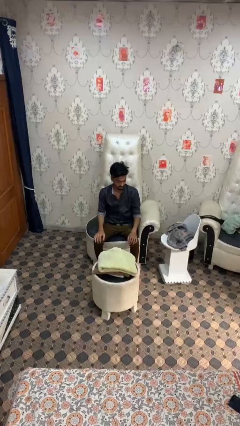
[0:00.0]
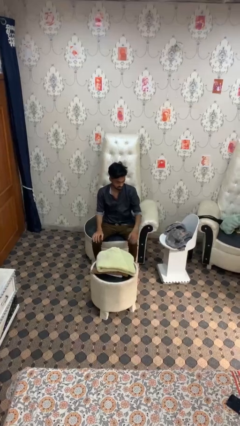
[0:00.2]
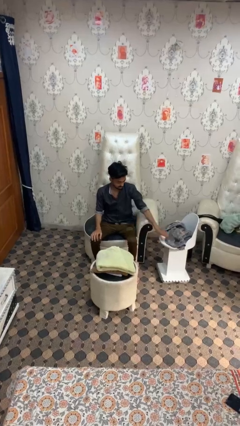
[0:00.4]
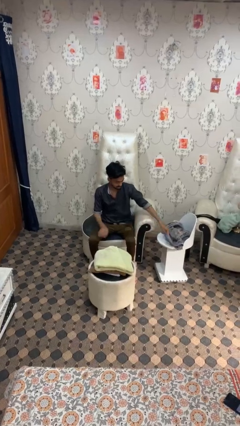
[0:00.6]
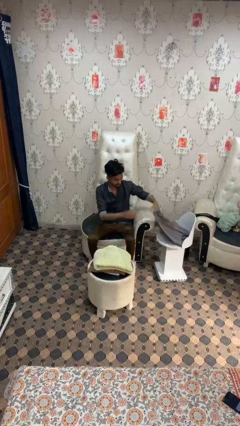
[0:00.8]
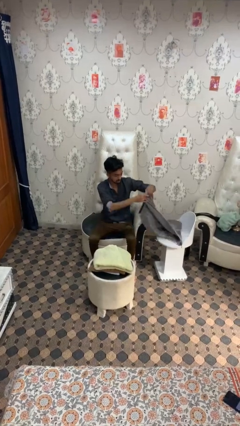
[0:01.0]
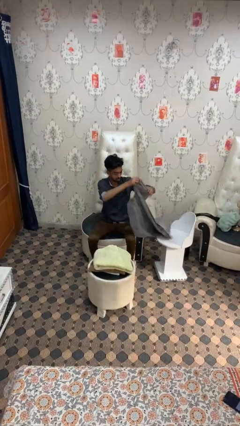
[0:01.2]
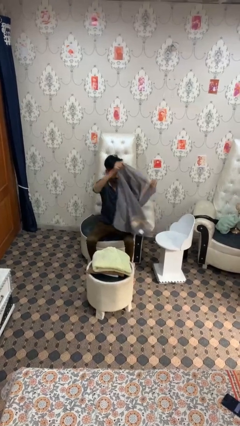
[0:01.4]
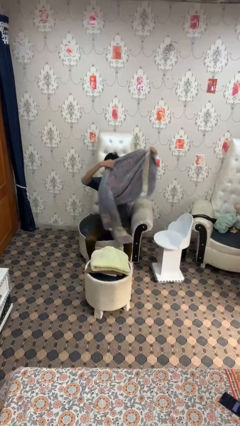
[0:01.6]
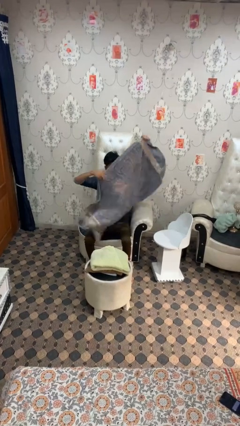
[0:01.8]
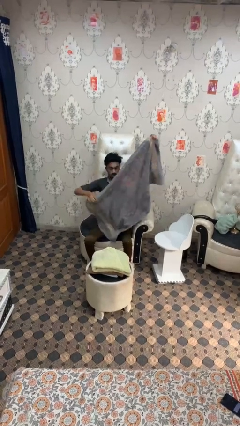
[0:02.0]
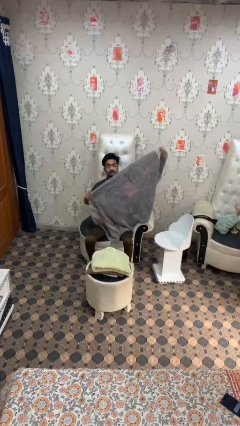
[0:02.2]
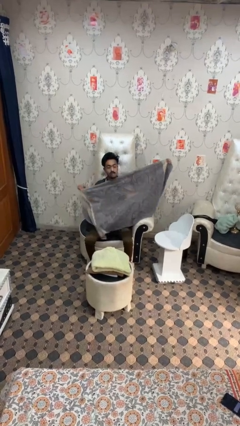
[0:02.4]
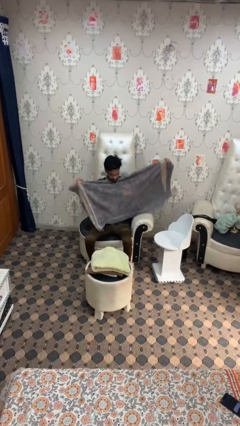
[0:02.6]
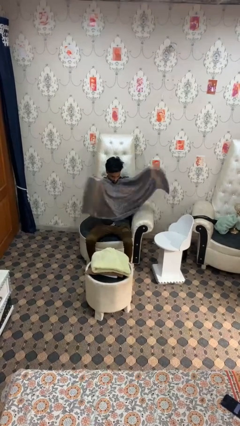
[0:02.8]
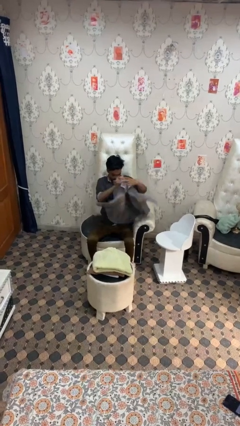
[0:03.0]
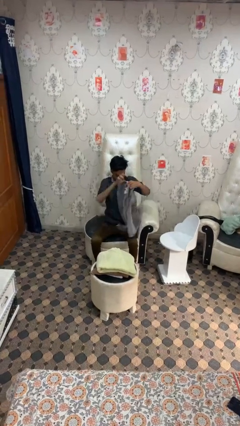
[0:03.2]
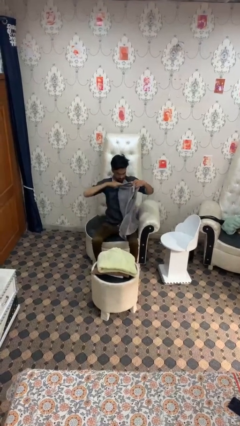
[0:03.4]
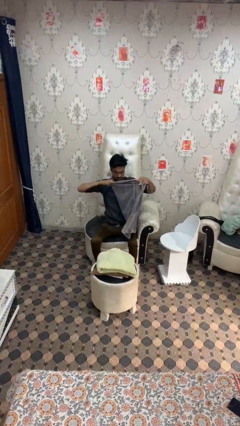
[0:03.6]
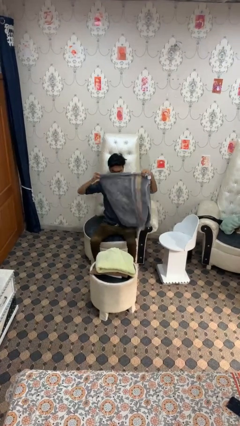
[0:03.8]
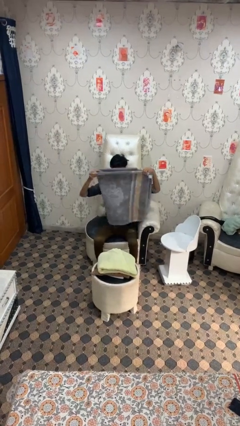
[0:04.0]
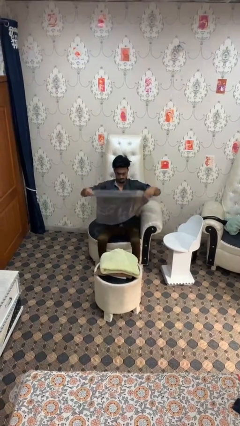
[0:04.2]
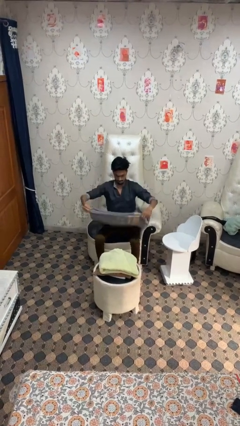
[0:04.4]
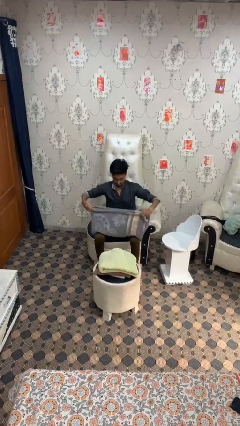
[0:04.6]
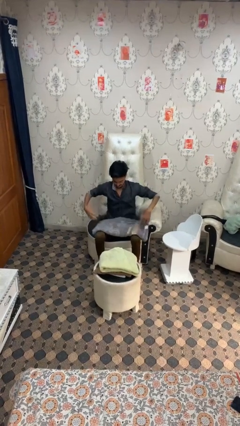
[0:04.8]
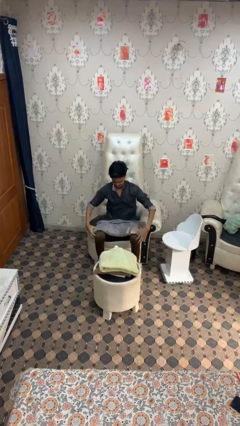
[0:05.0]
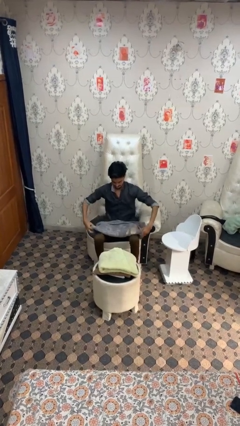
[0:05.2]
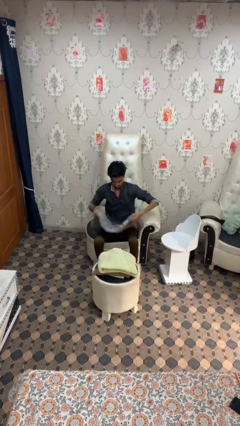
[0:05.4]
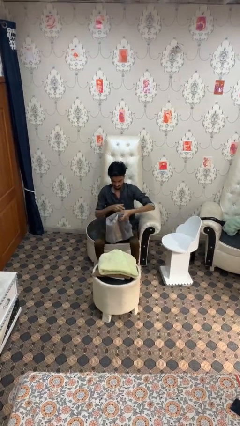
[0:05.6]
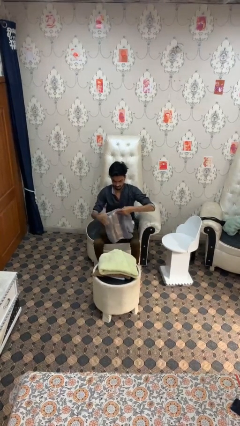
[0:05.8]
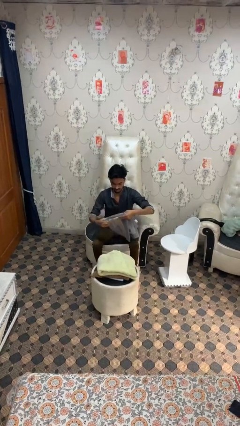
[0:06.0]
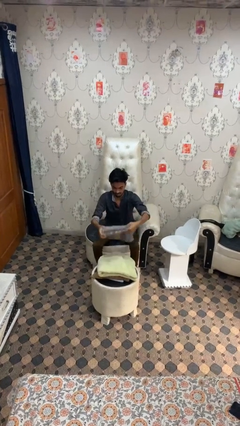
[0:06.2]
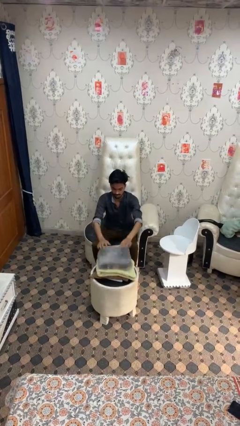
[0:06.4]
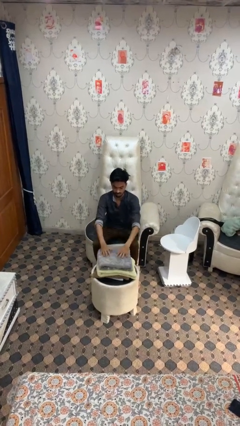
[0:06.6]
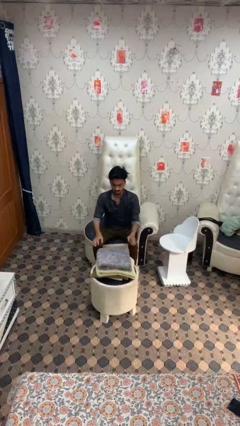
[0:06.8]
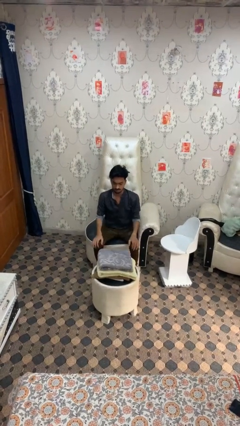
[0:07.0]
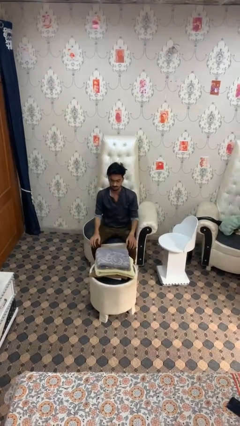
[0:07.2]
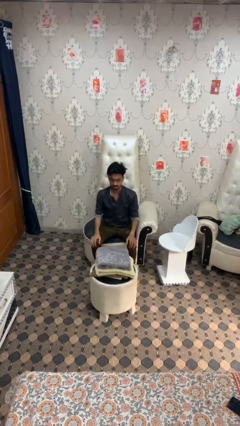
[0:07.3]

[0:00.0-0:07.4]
person folds towel

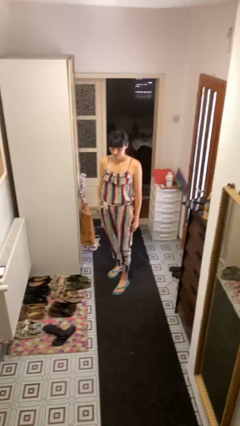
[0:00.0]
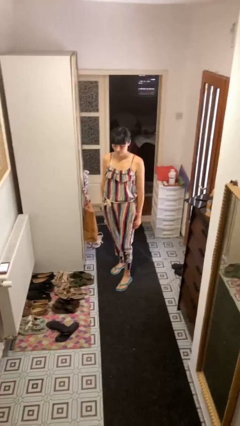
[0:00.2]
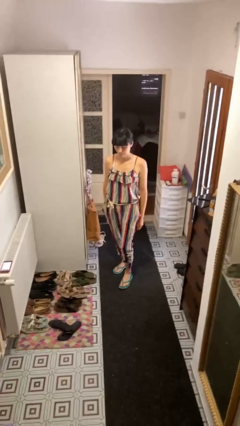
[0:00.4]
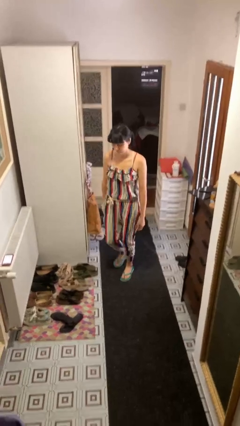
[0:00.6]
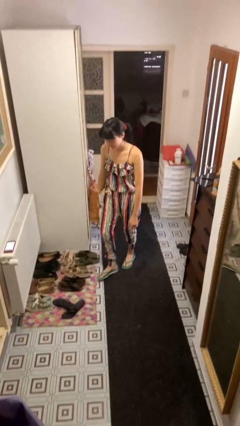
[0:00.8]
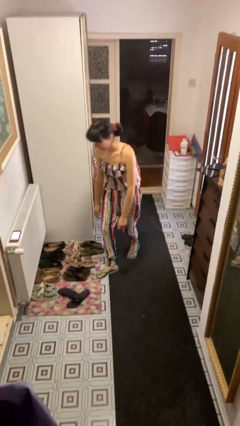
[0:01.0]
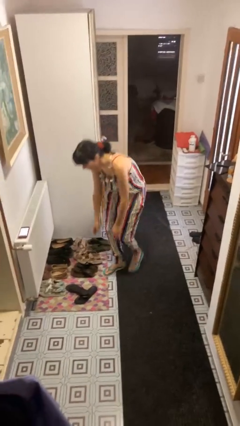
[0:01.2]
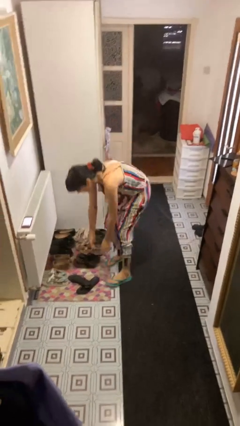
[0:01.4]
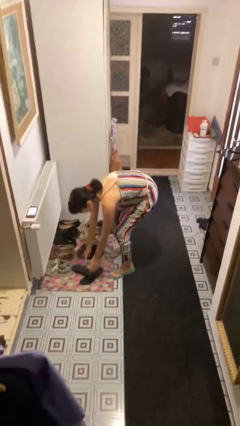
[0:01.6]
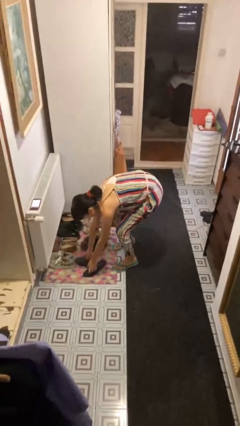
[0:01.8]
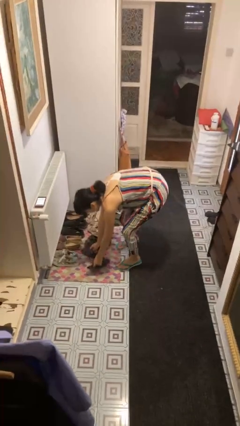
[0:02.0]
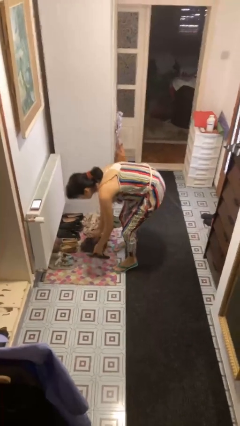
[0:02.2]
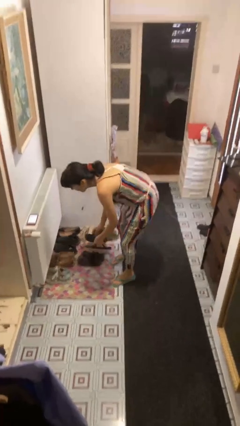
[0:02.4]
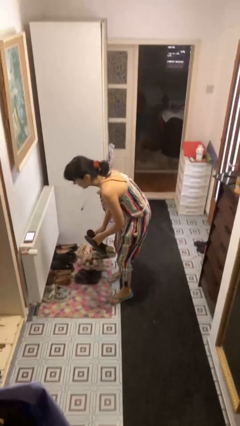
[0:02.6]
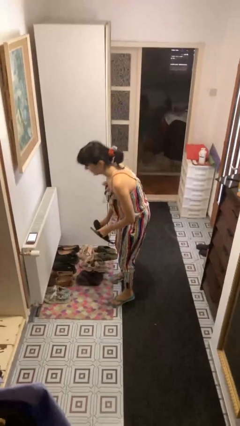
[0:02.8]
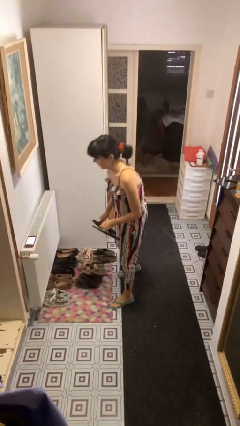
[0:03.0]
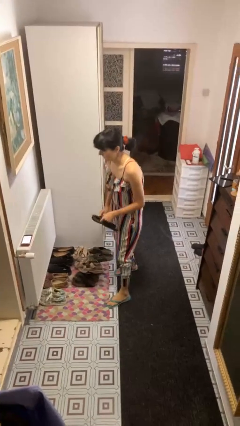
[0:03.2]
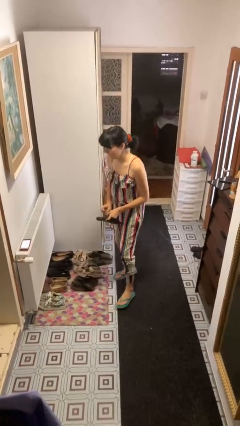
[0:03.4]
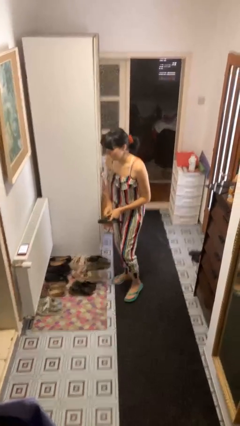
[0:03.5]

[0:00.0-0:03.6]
person picks up object from floor

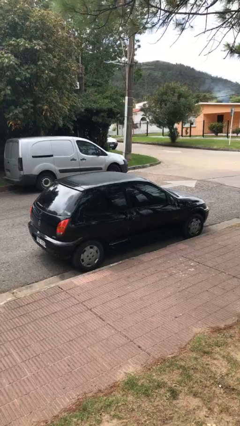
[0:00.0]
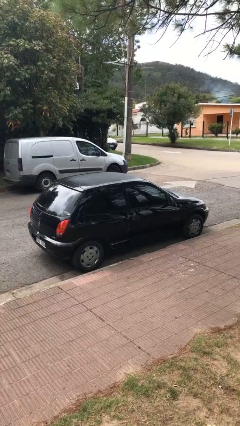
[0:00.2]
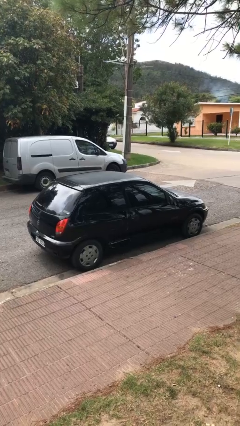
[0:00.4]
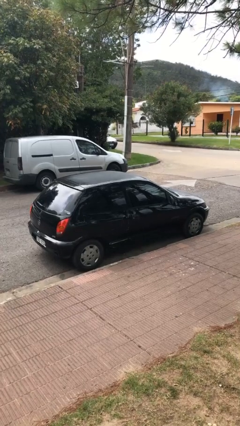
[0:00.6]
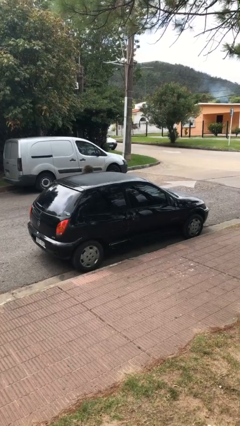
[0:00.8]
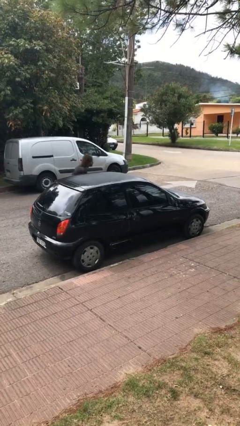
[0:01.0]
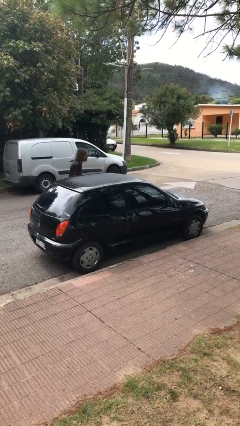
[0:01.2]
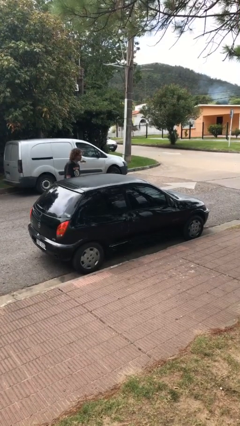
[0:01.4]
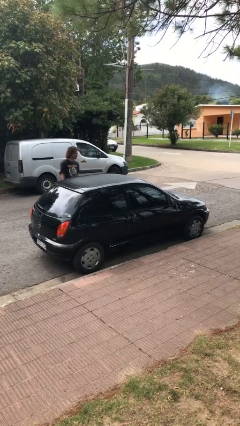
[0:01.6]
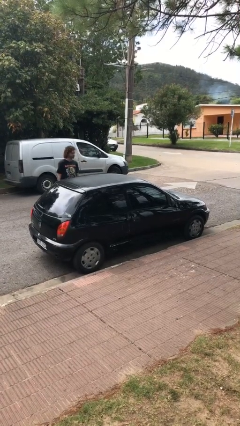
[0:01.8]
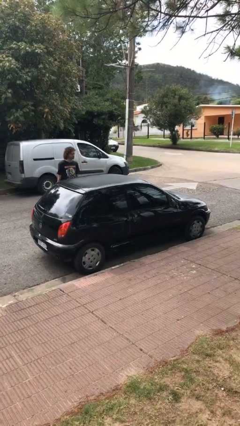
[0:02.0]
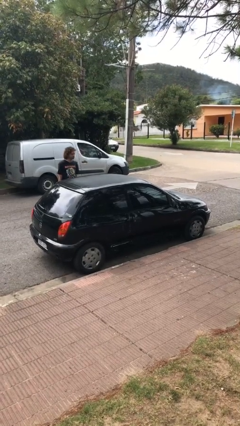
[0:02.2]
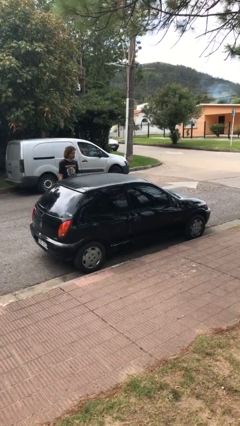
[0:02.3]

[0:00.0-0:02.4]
car drops off person

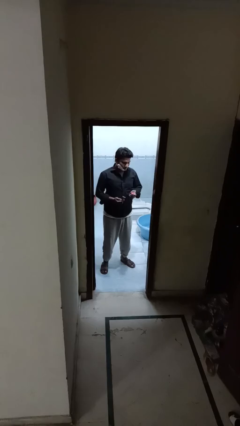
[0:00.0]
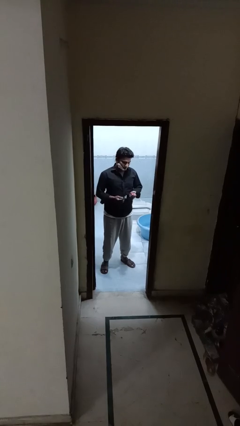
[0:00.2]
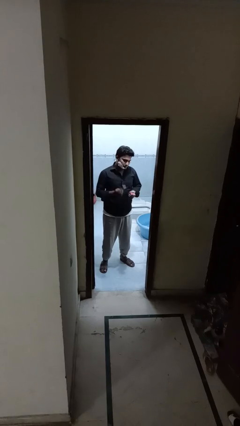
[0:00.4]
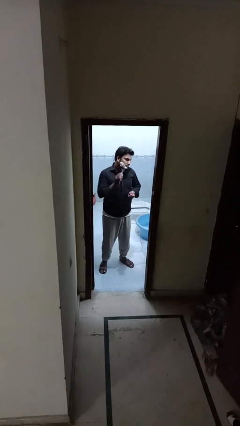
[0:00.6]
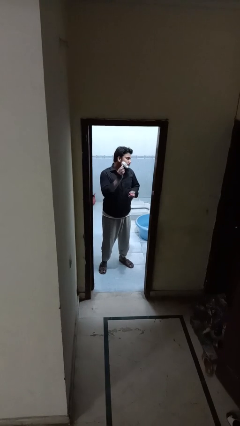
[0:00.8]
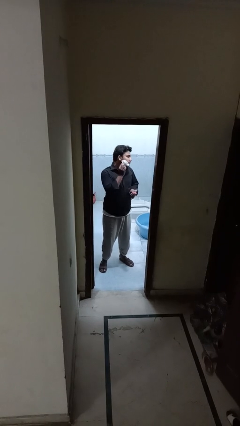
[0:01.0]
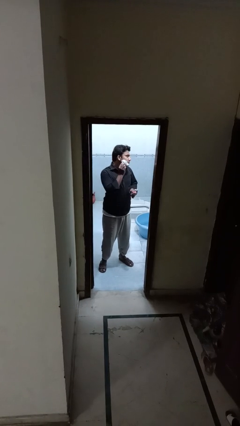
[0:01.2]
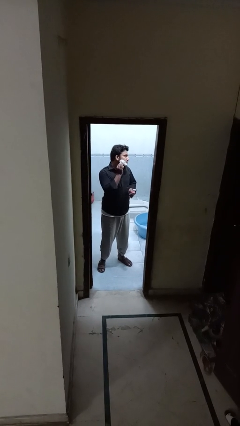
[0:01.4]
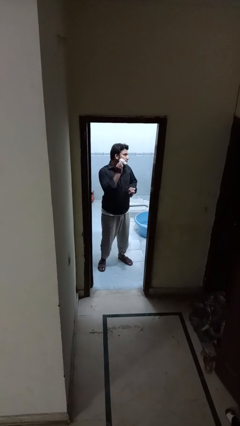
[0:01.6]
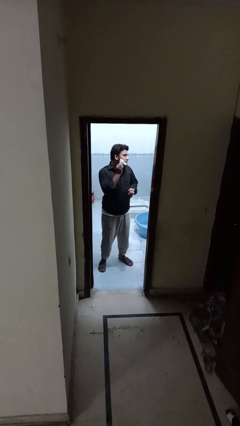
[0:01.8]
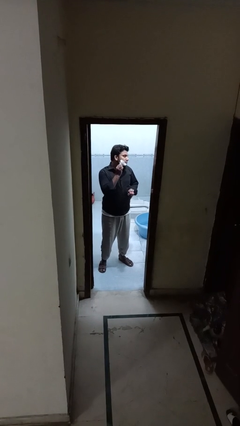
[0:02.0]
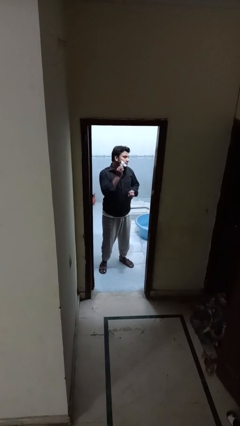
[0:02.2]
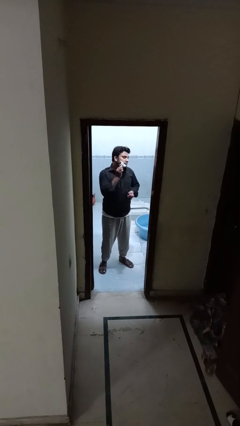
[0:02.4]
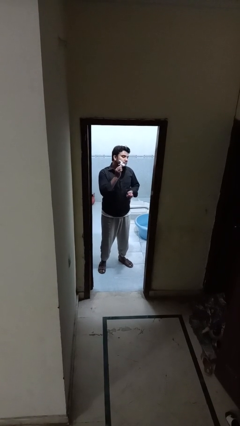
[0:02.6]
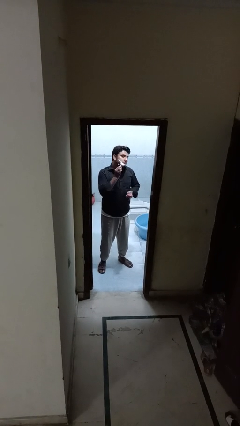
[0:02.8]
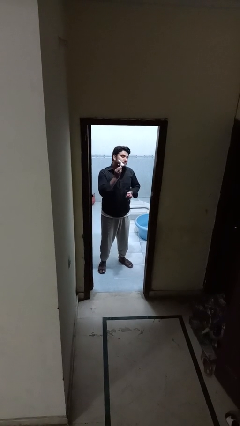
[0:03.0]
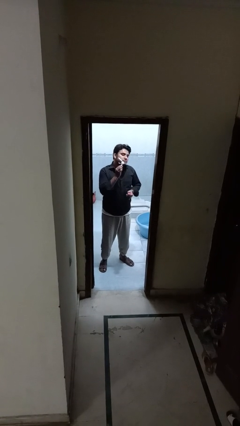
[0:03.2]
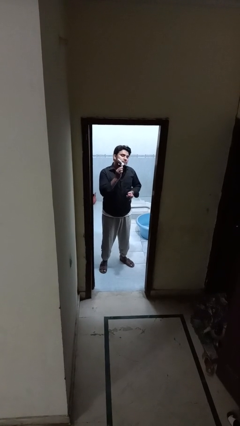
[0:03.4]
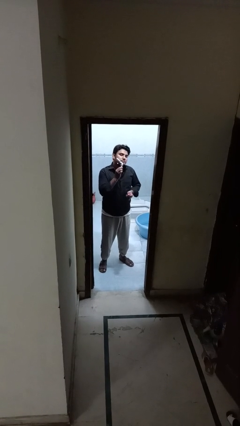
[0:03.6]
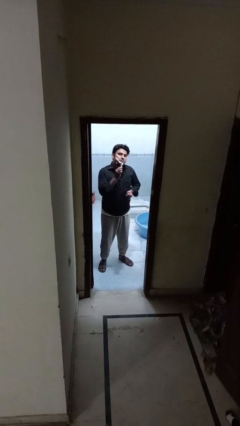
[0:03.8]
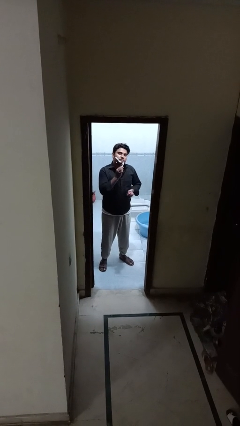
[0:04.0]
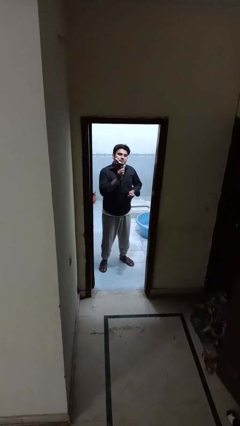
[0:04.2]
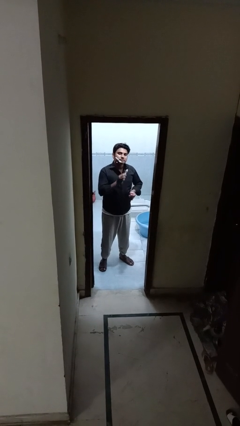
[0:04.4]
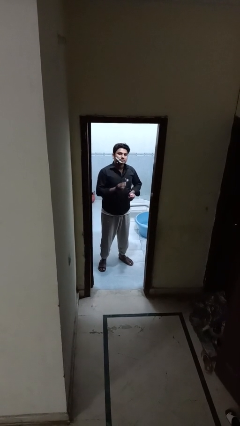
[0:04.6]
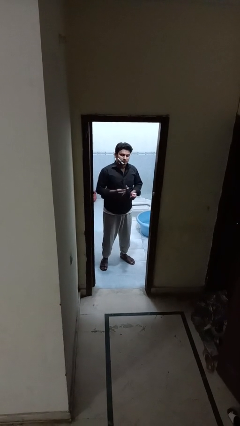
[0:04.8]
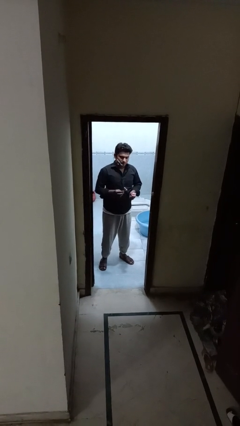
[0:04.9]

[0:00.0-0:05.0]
person shaves face
